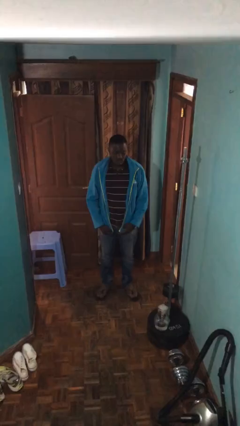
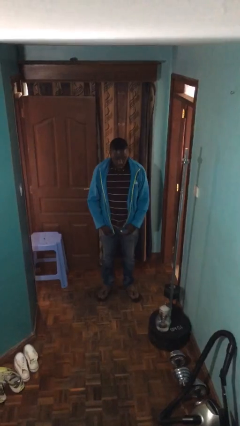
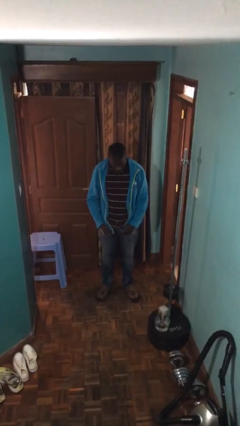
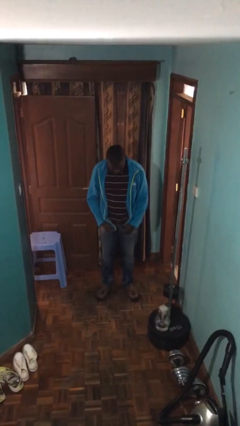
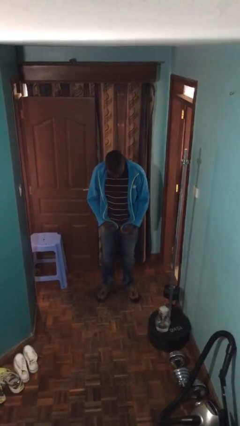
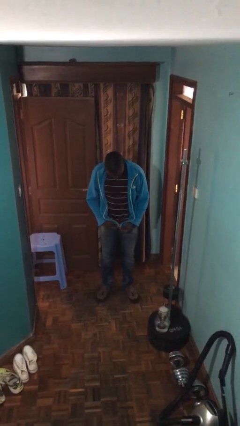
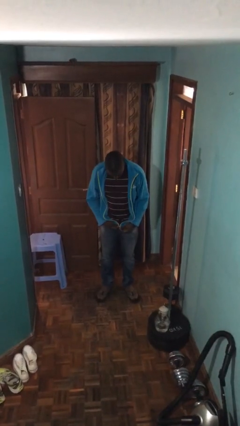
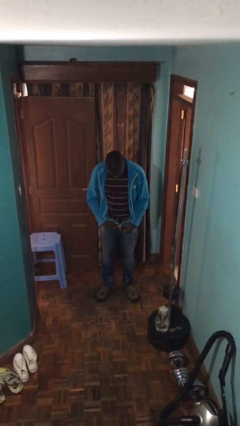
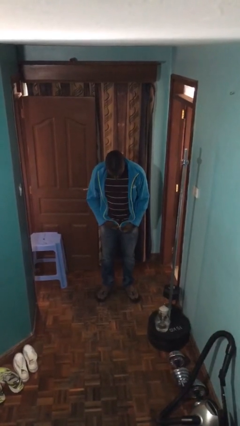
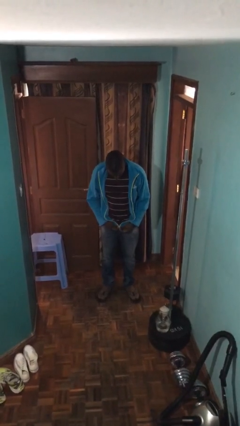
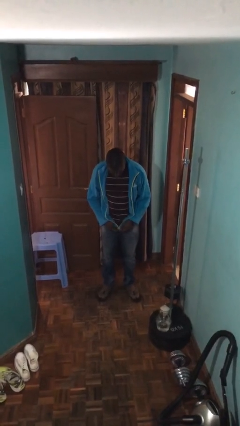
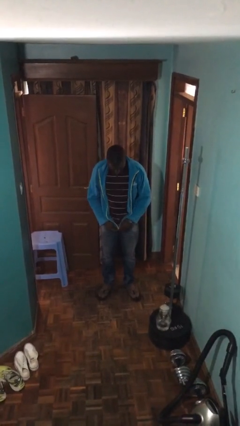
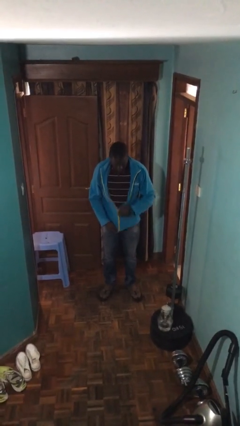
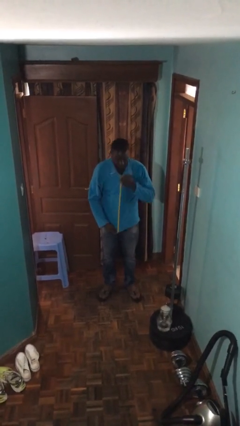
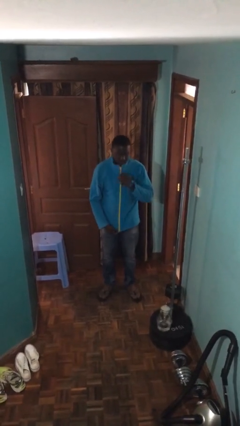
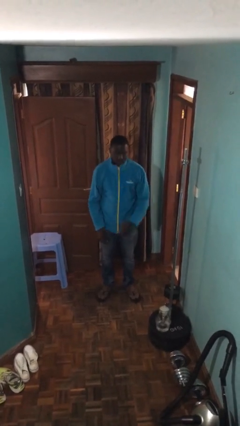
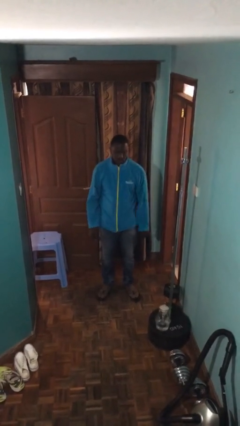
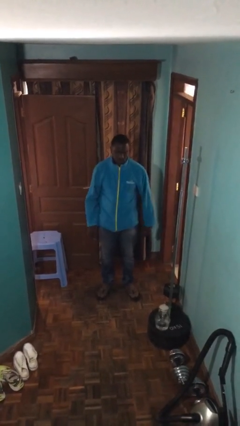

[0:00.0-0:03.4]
person zips up jacket

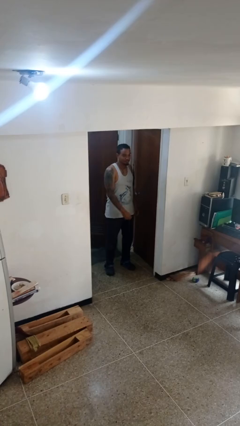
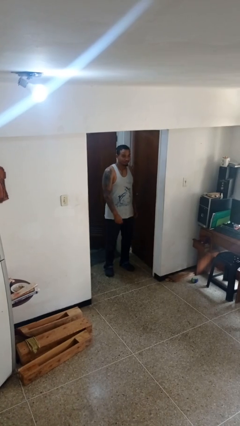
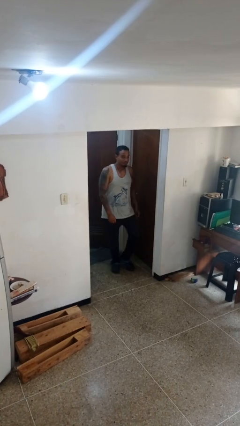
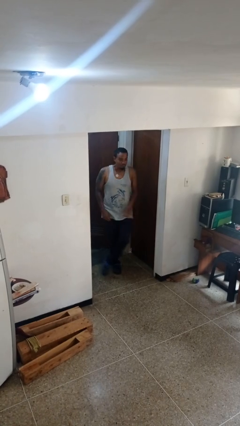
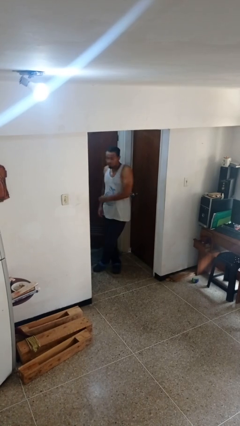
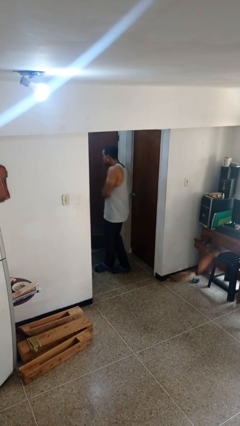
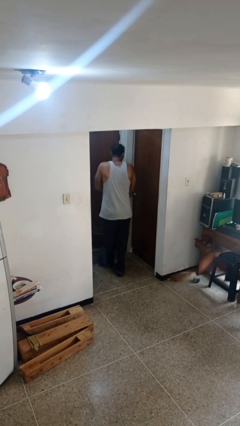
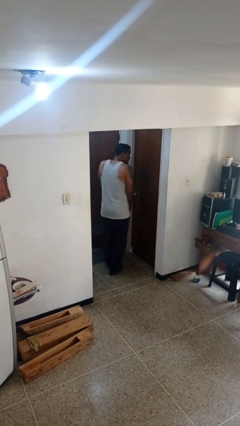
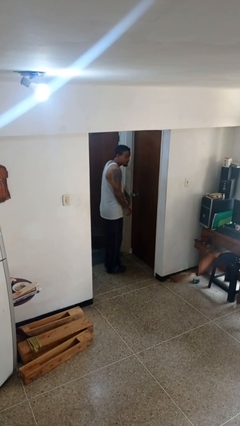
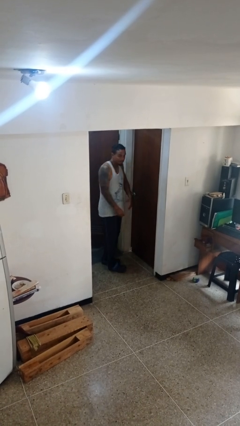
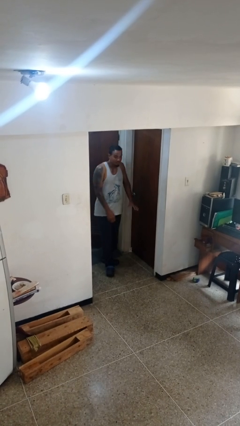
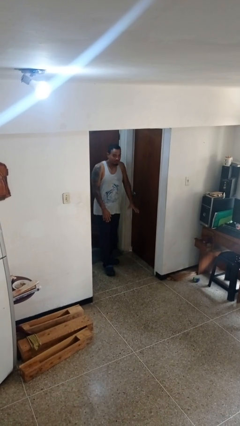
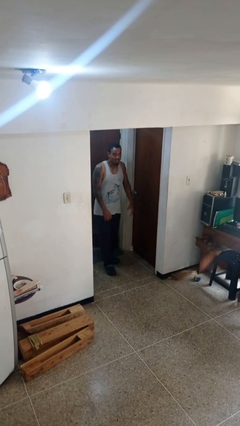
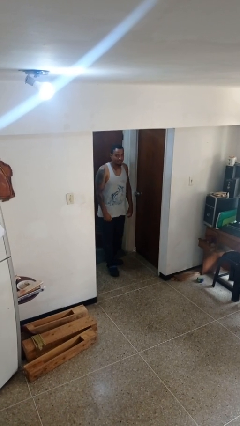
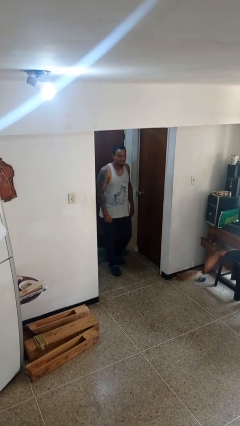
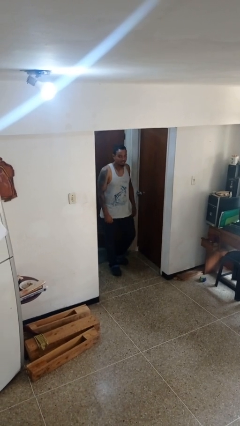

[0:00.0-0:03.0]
person twirls

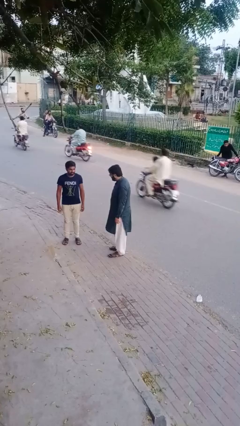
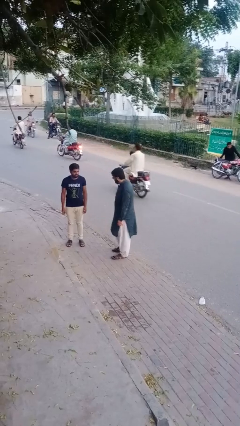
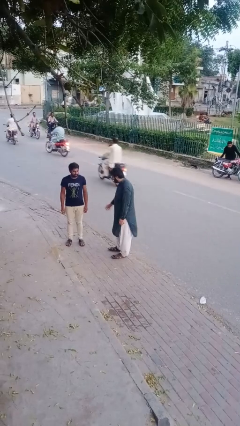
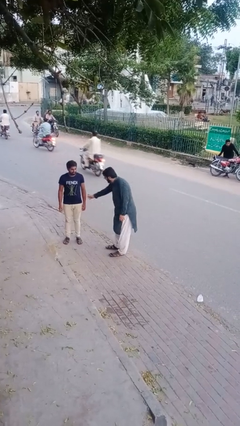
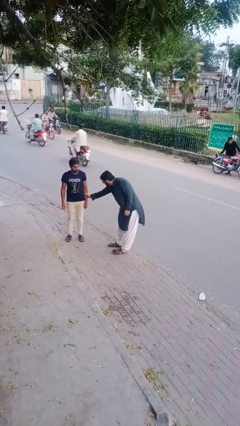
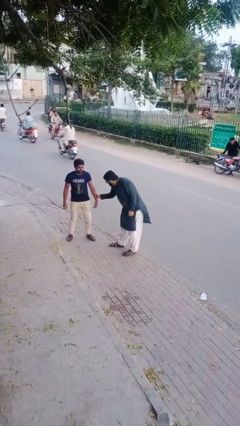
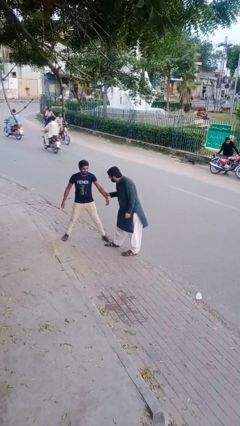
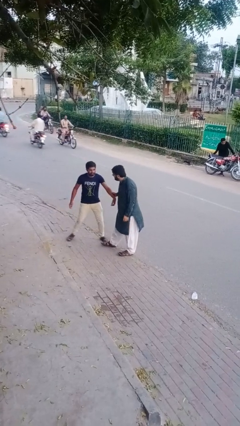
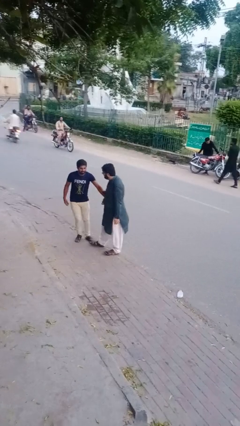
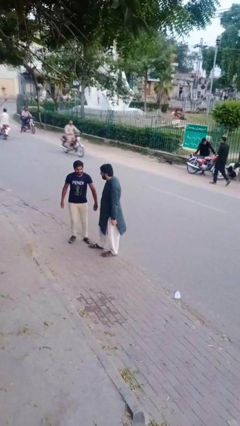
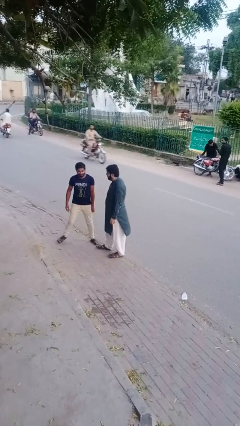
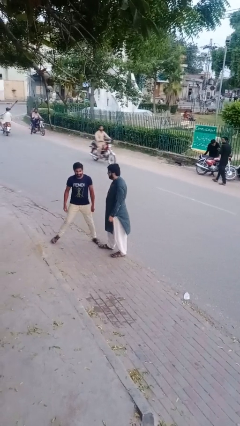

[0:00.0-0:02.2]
person grabs person by forearm

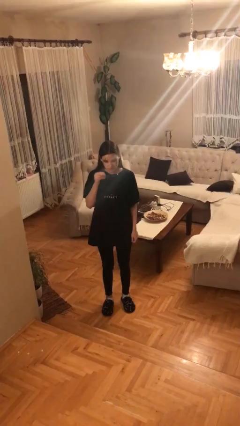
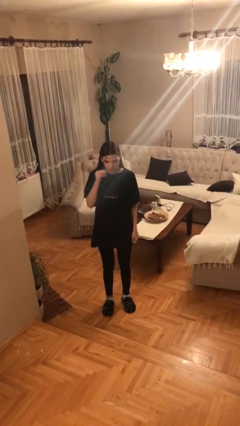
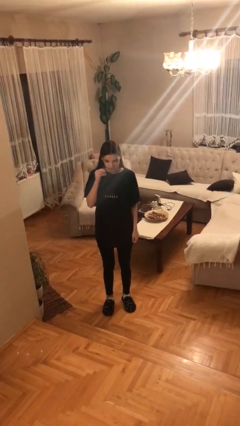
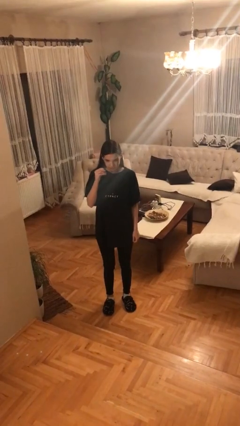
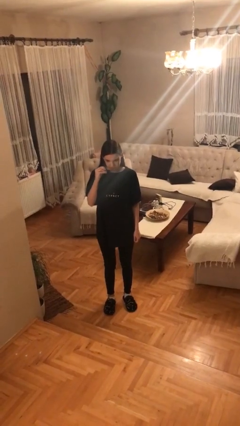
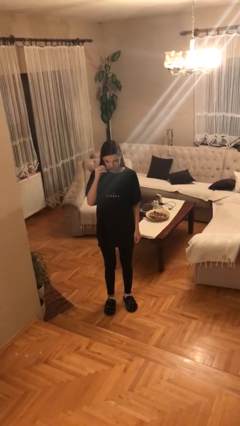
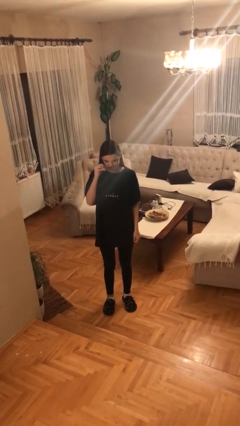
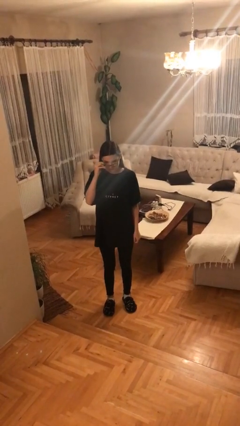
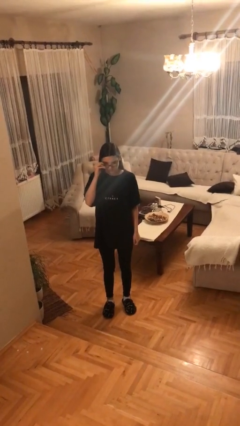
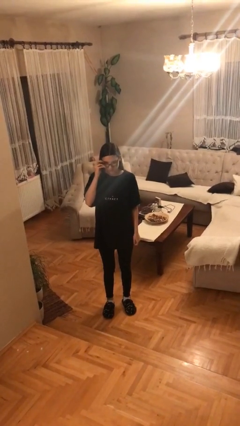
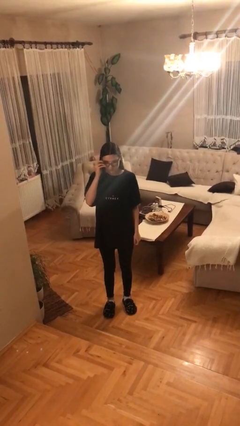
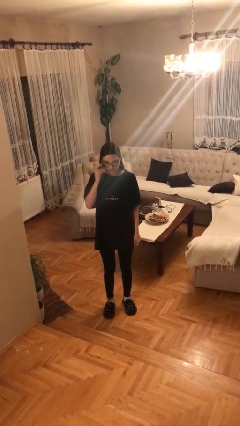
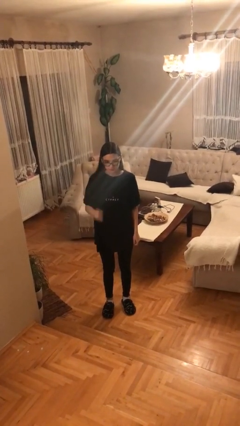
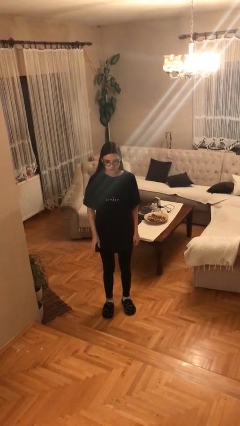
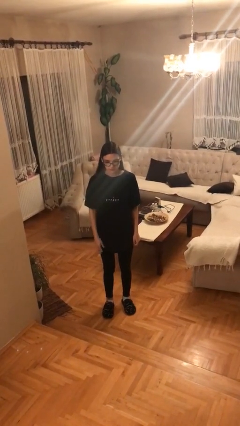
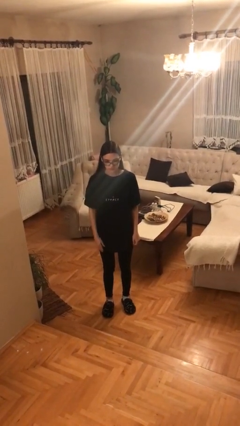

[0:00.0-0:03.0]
person puts on glasses

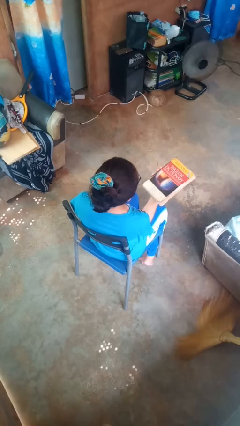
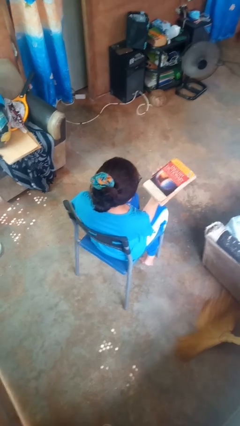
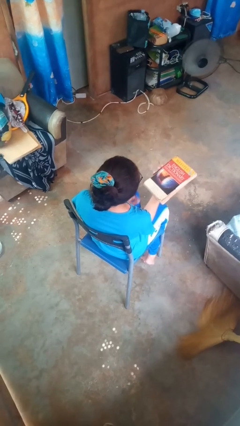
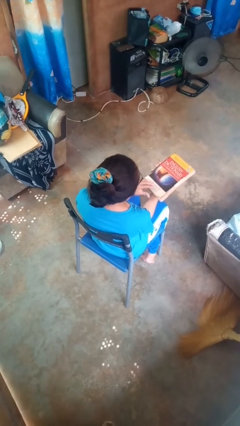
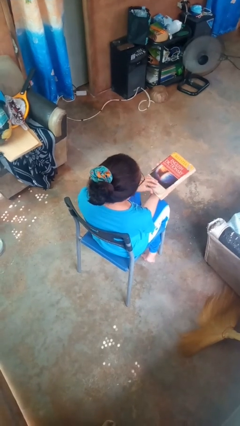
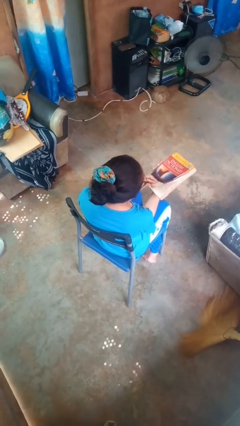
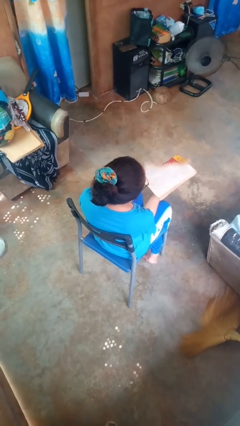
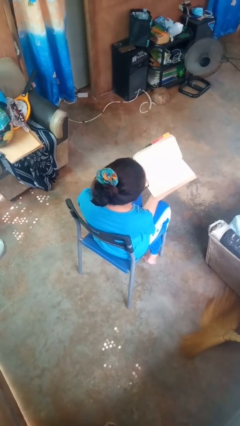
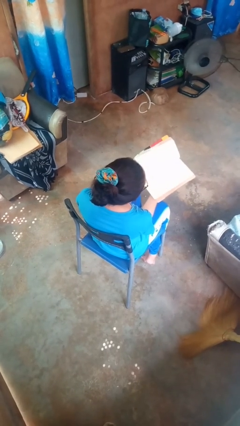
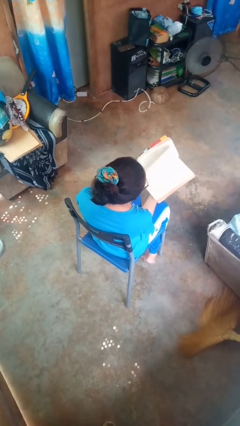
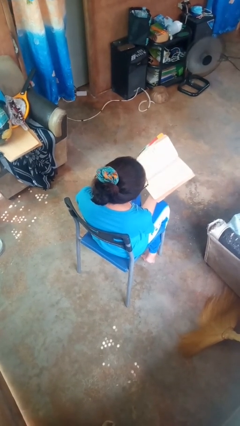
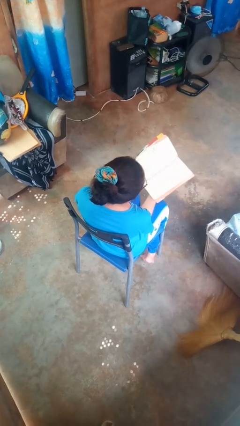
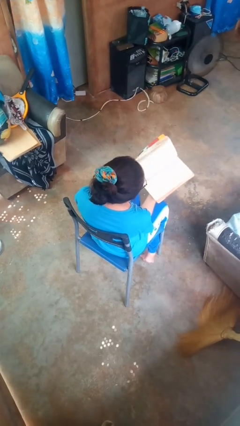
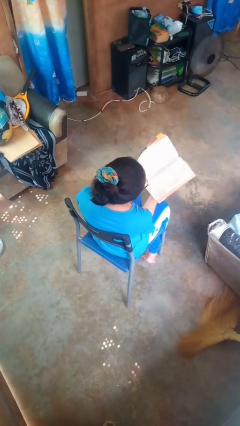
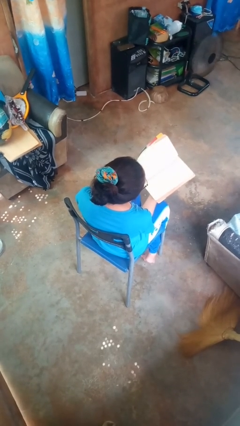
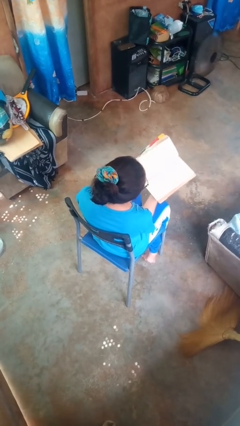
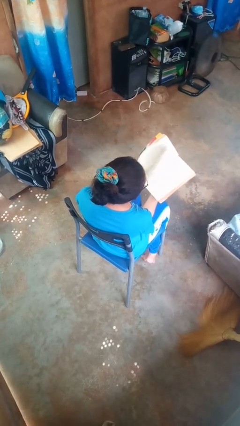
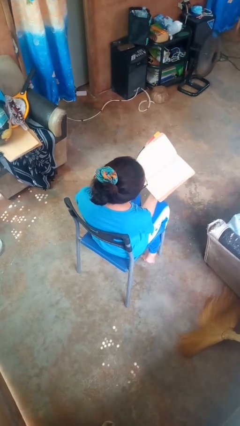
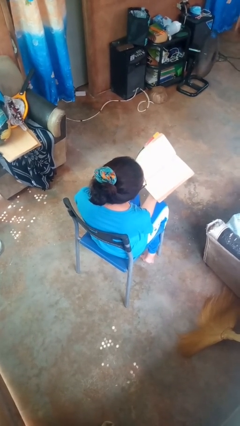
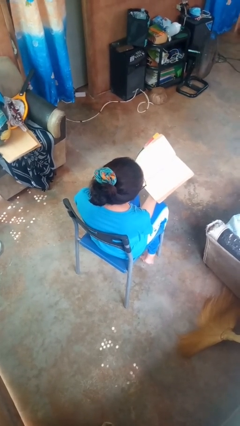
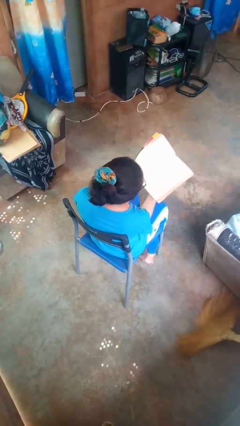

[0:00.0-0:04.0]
person reads book

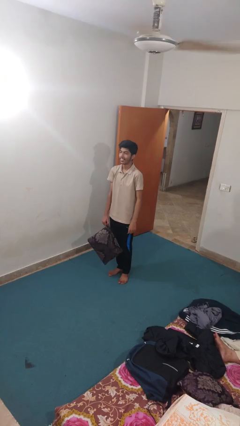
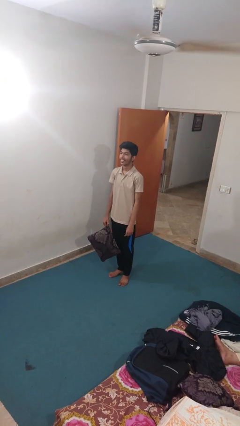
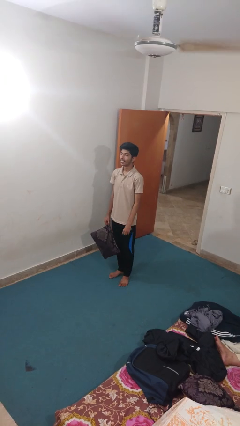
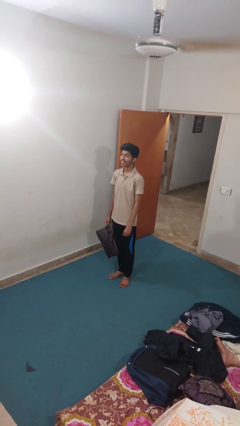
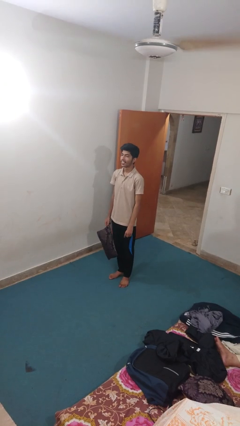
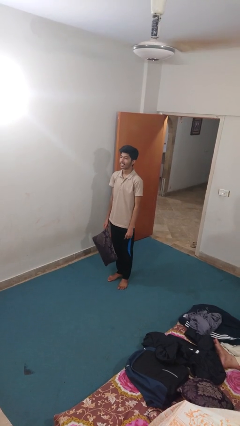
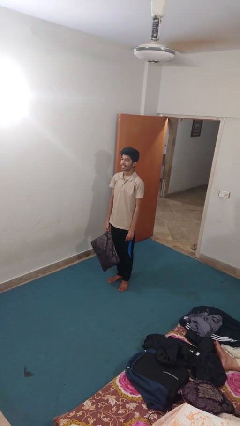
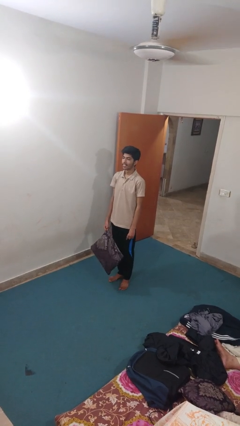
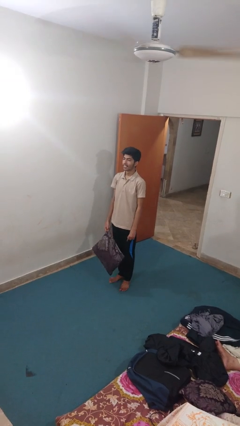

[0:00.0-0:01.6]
person picks up object from floor
